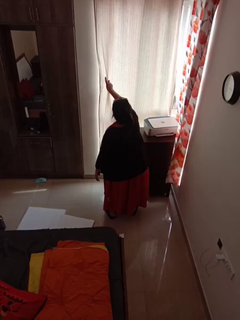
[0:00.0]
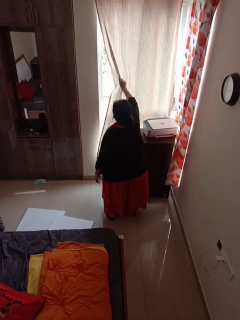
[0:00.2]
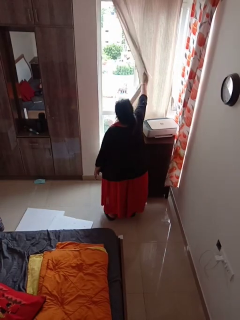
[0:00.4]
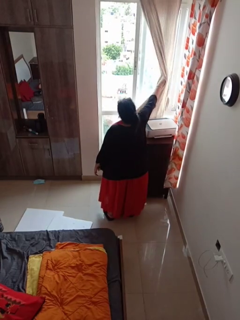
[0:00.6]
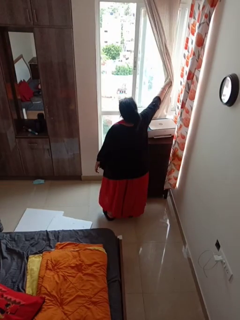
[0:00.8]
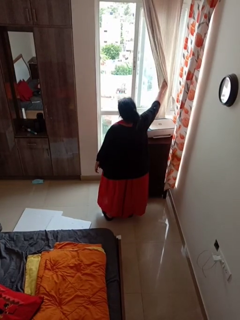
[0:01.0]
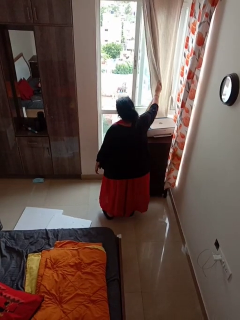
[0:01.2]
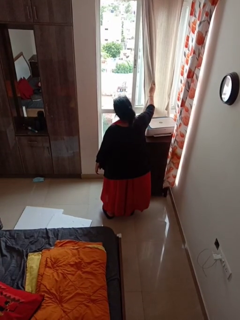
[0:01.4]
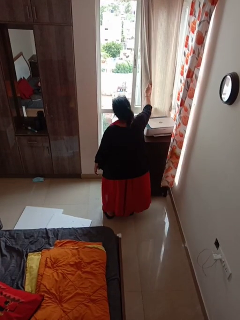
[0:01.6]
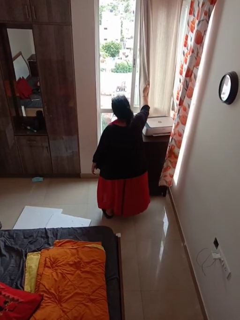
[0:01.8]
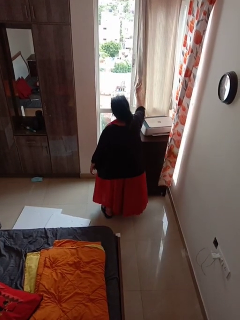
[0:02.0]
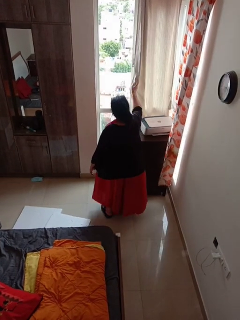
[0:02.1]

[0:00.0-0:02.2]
person opens curtains

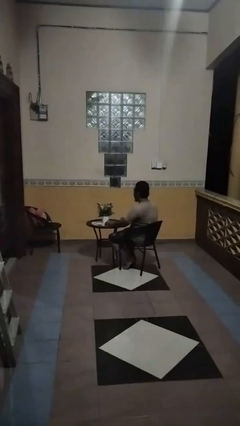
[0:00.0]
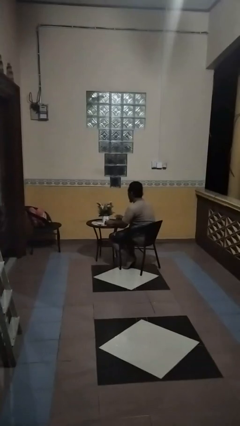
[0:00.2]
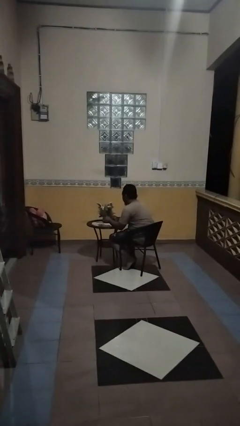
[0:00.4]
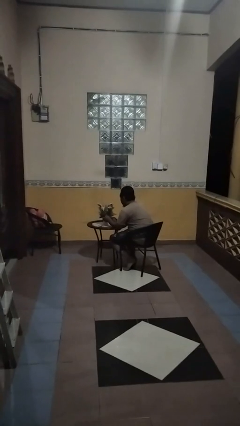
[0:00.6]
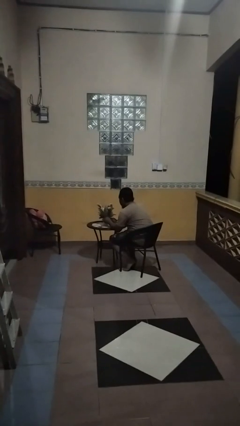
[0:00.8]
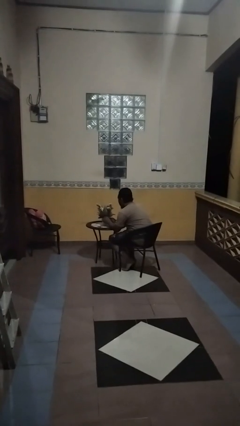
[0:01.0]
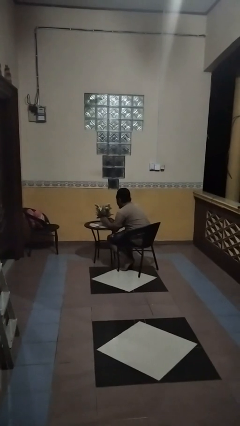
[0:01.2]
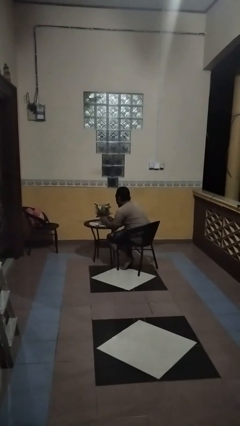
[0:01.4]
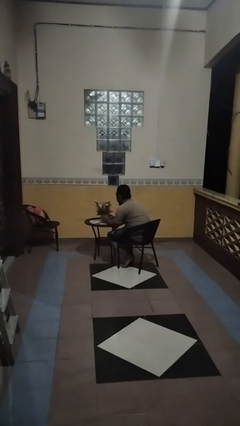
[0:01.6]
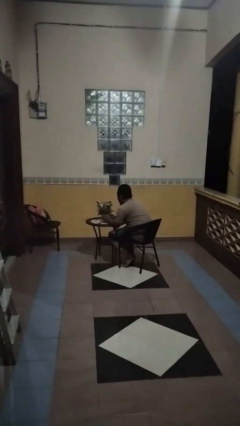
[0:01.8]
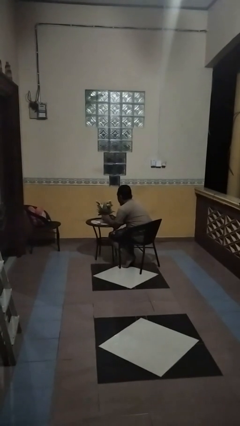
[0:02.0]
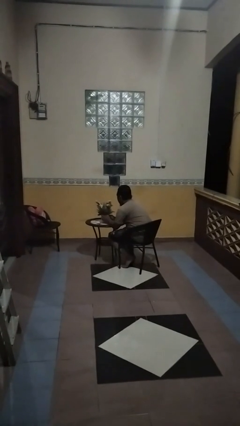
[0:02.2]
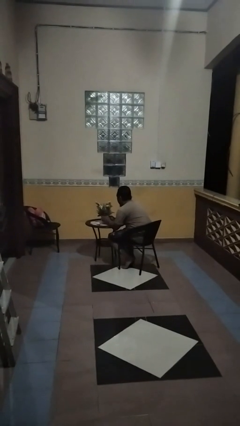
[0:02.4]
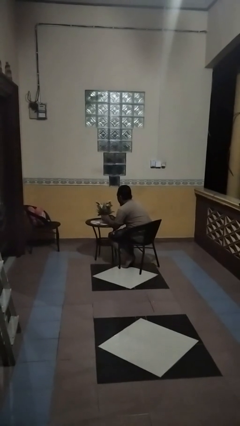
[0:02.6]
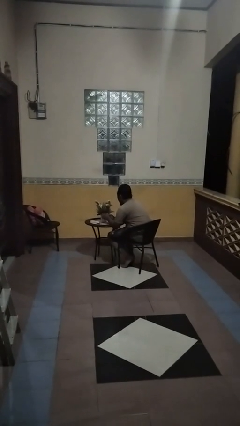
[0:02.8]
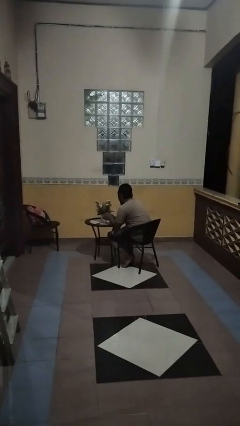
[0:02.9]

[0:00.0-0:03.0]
person arranges flowers in vase

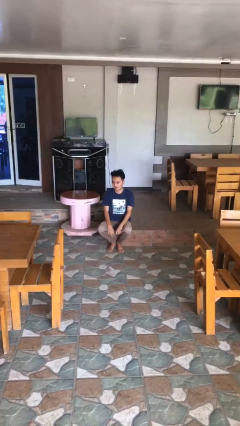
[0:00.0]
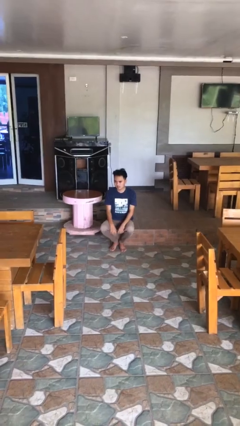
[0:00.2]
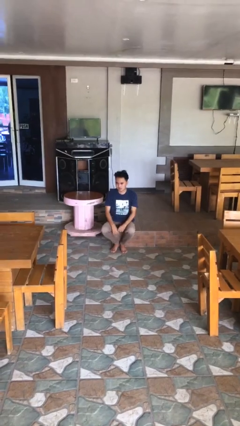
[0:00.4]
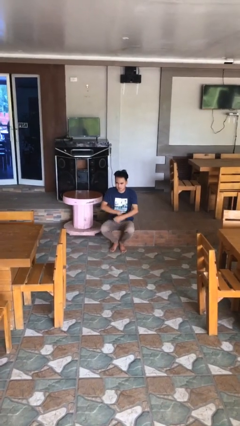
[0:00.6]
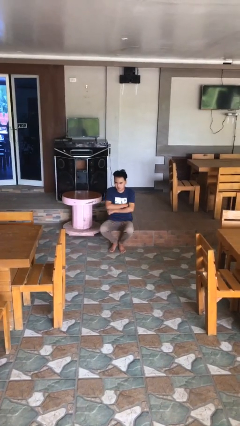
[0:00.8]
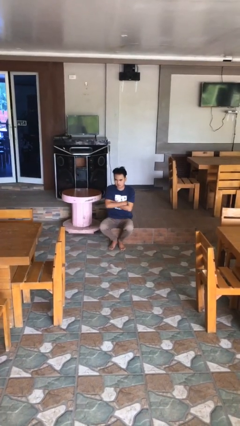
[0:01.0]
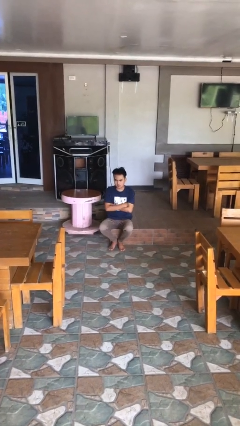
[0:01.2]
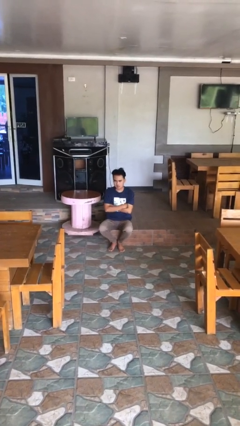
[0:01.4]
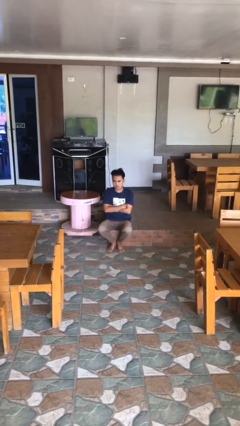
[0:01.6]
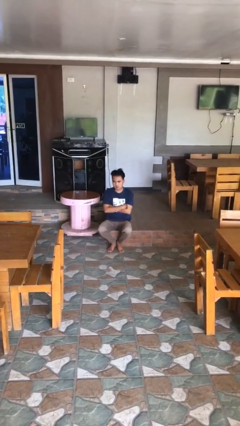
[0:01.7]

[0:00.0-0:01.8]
person crosses arms

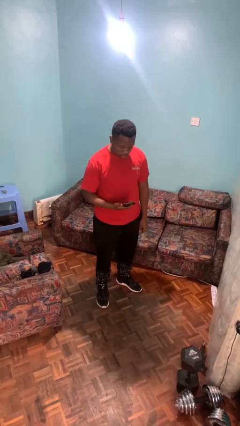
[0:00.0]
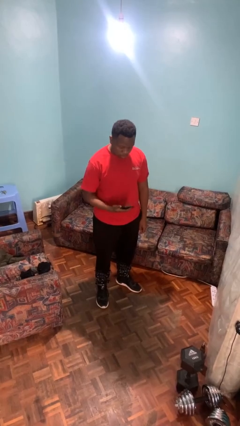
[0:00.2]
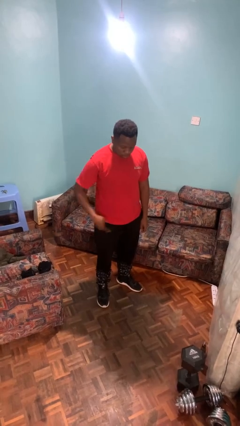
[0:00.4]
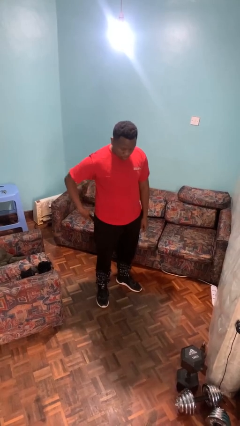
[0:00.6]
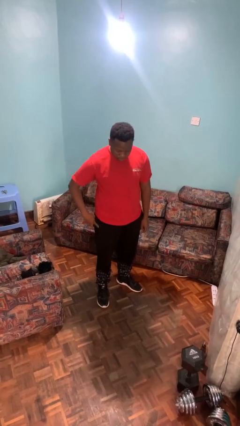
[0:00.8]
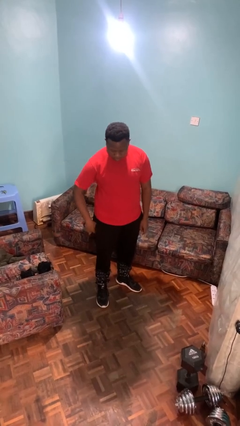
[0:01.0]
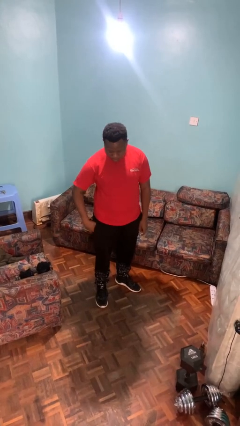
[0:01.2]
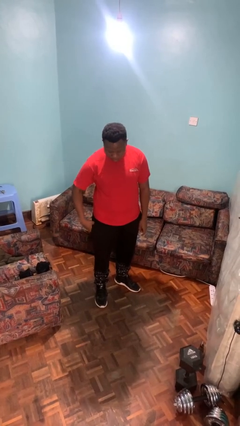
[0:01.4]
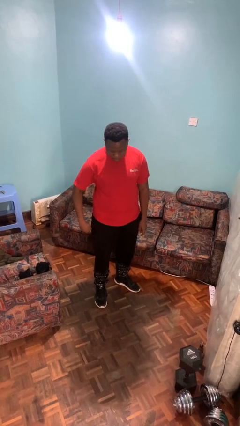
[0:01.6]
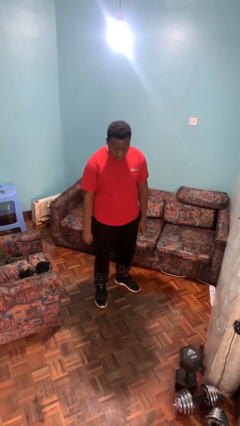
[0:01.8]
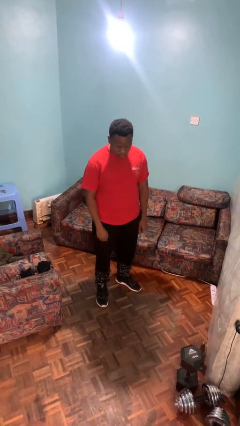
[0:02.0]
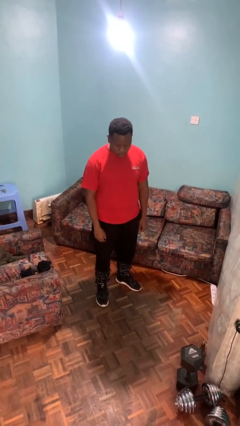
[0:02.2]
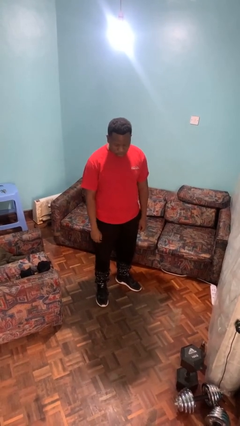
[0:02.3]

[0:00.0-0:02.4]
person puts phone into pocket

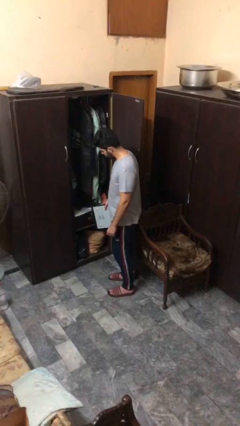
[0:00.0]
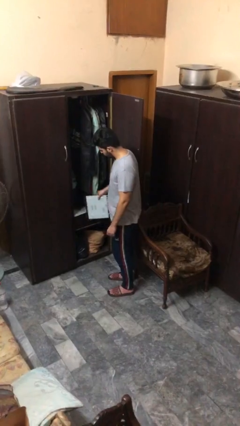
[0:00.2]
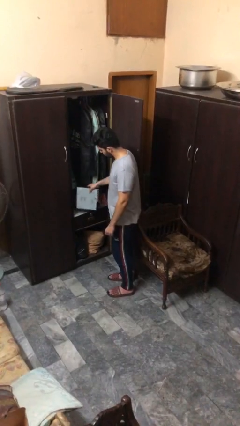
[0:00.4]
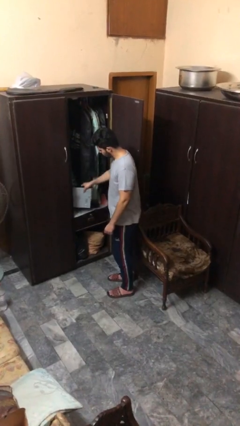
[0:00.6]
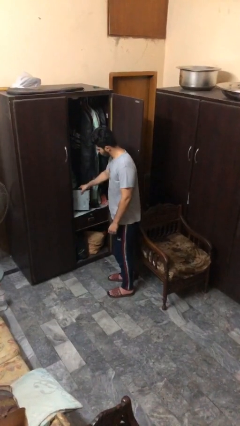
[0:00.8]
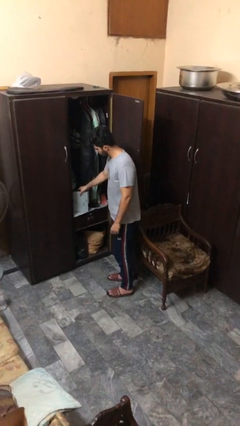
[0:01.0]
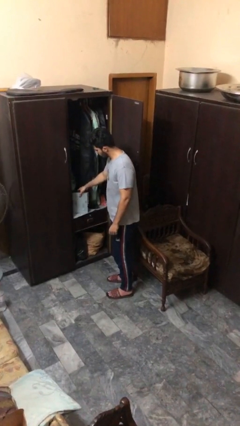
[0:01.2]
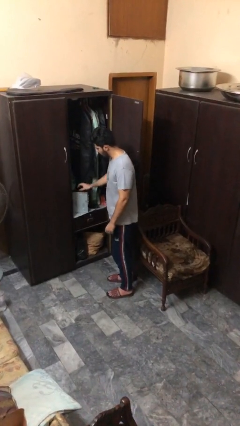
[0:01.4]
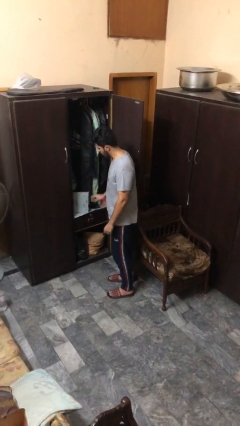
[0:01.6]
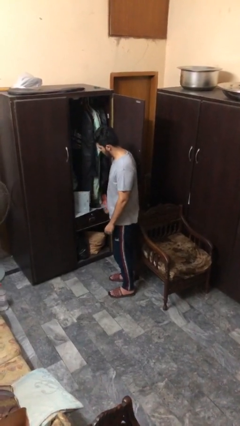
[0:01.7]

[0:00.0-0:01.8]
person puts down object into cabinet

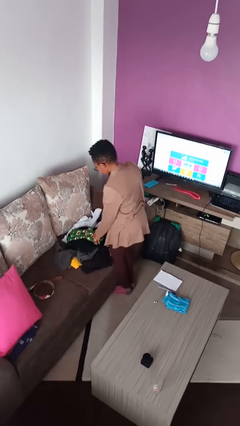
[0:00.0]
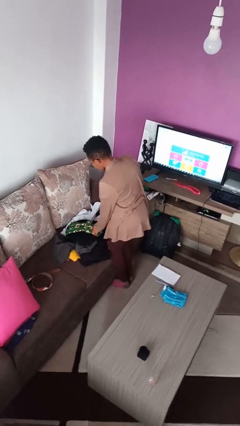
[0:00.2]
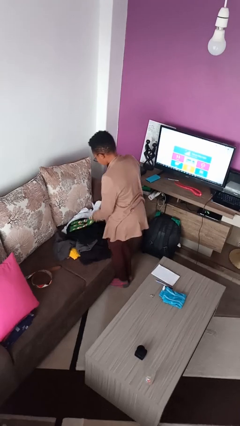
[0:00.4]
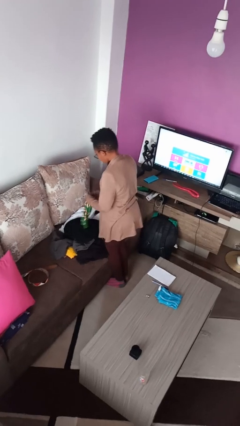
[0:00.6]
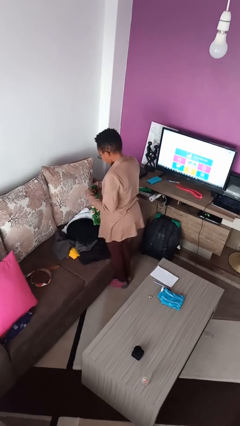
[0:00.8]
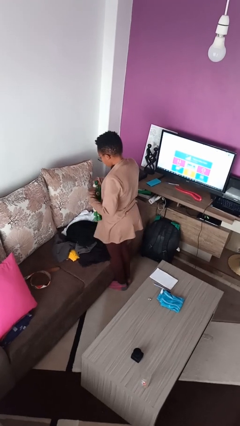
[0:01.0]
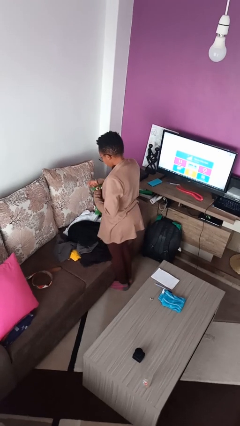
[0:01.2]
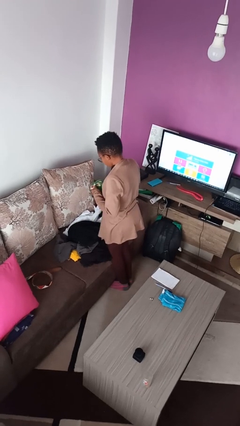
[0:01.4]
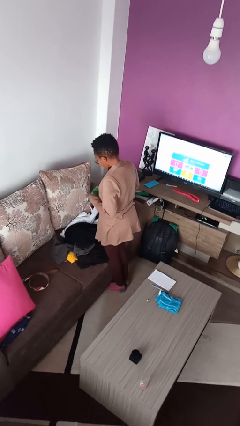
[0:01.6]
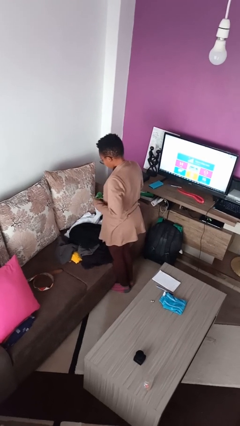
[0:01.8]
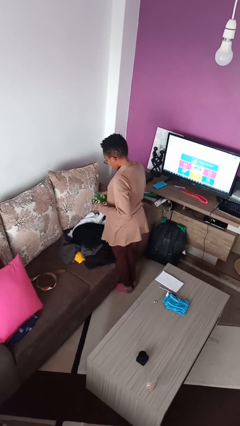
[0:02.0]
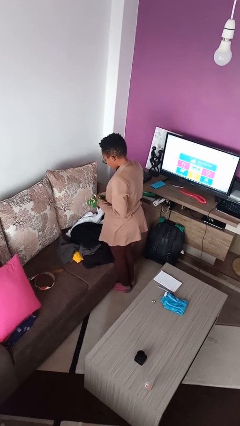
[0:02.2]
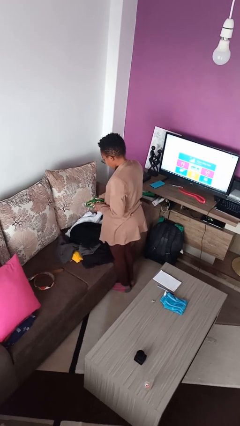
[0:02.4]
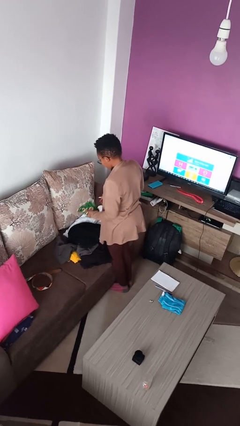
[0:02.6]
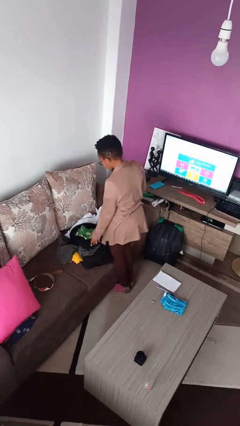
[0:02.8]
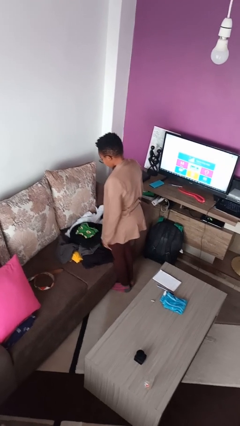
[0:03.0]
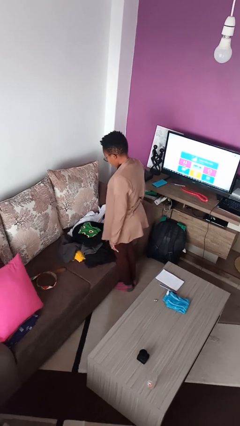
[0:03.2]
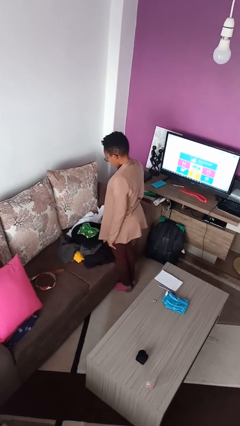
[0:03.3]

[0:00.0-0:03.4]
person folds socks

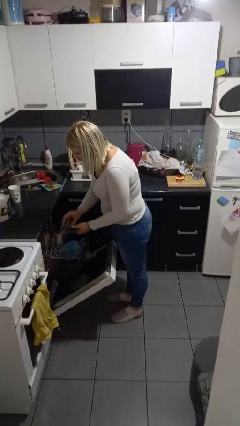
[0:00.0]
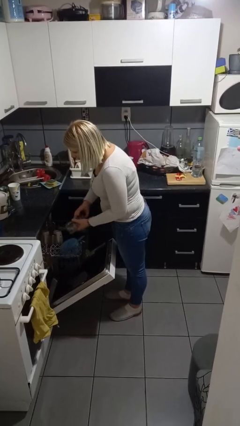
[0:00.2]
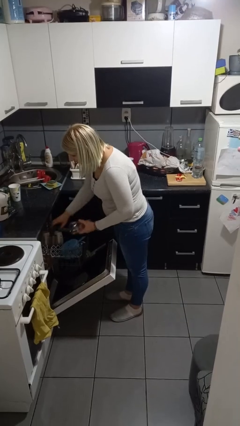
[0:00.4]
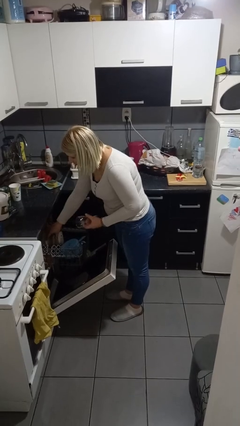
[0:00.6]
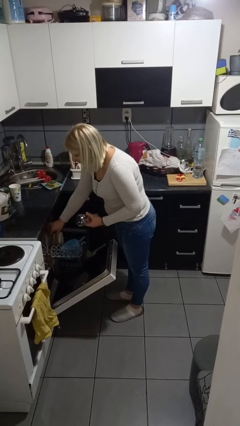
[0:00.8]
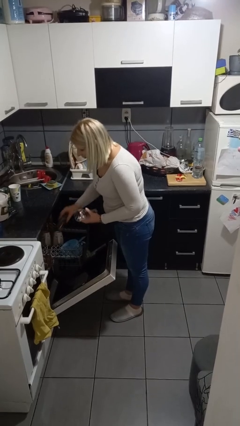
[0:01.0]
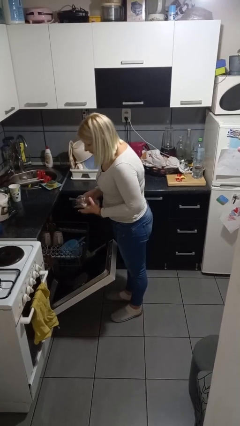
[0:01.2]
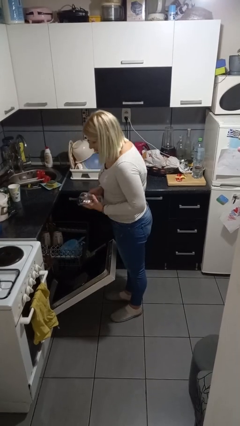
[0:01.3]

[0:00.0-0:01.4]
person unloads dishwasher

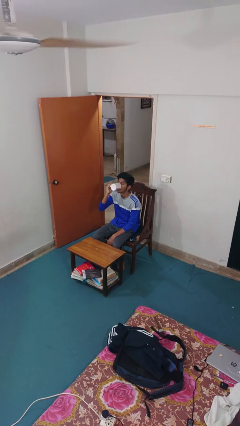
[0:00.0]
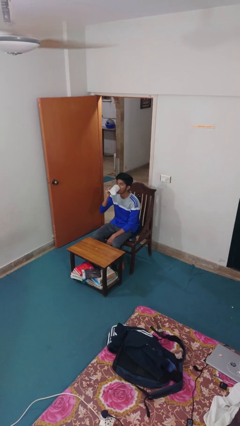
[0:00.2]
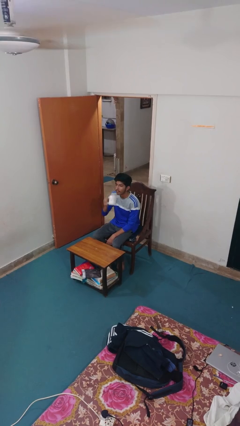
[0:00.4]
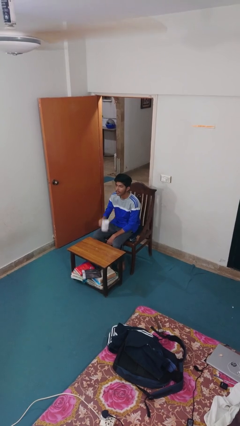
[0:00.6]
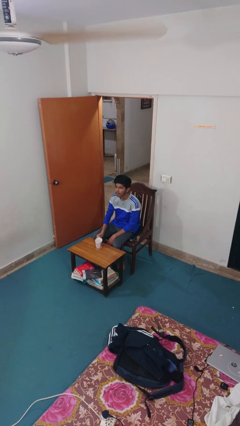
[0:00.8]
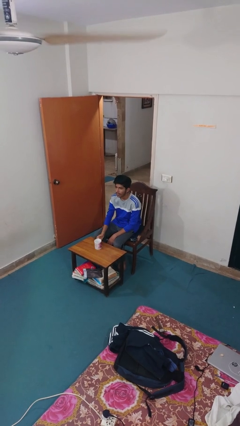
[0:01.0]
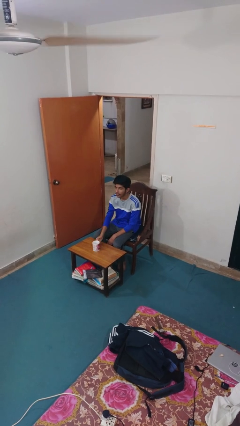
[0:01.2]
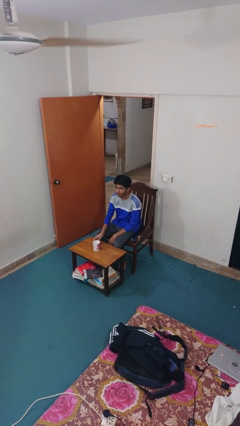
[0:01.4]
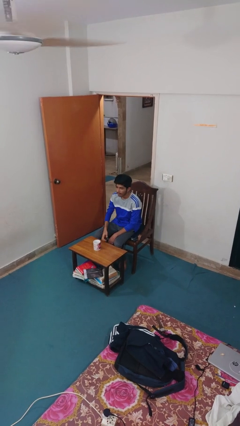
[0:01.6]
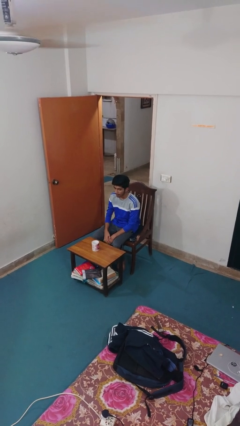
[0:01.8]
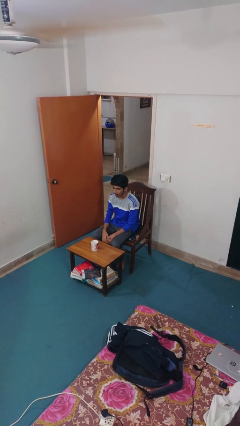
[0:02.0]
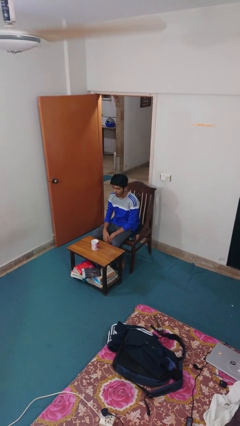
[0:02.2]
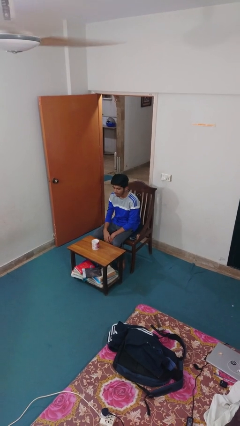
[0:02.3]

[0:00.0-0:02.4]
person puts down object on table
